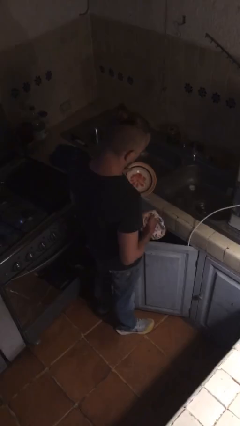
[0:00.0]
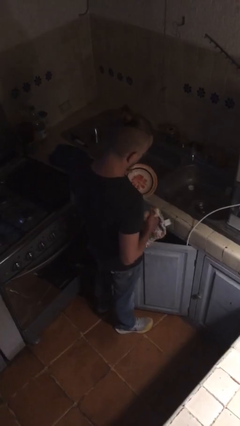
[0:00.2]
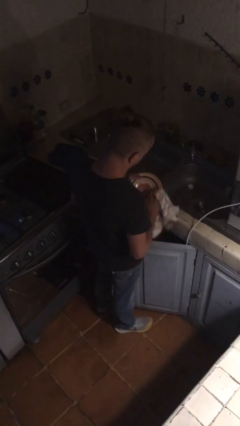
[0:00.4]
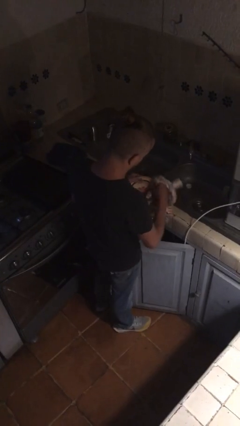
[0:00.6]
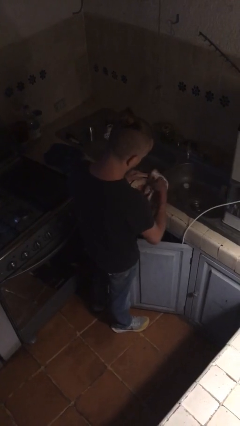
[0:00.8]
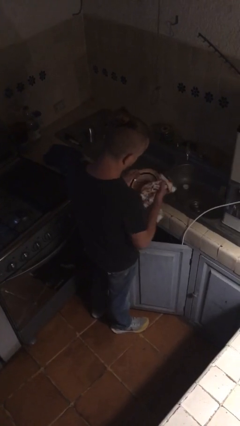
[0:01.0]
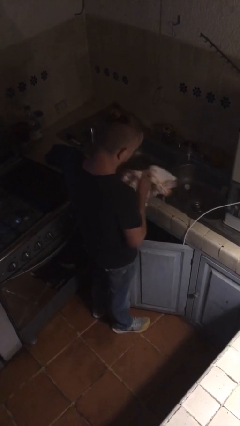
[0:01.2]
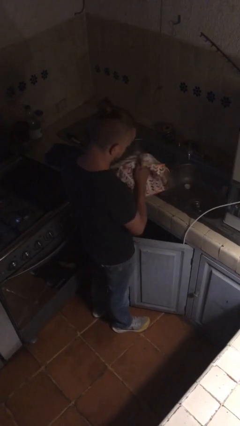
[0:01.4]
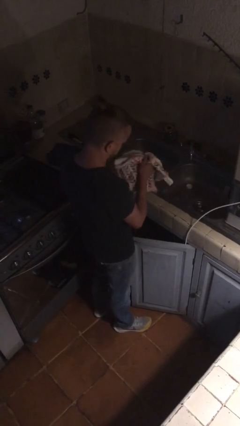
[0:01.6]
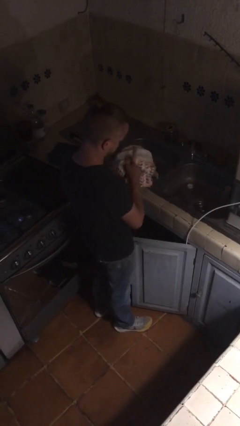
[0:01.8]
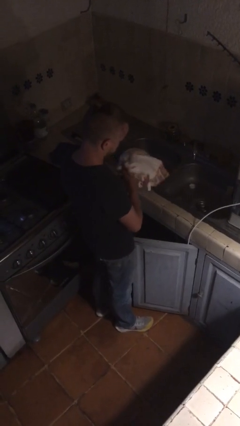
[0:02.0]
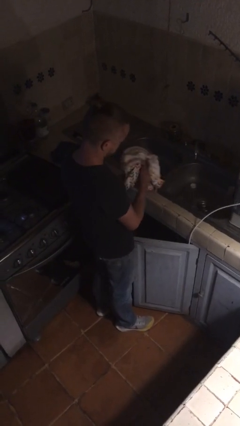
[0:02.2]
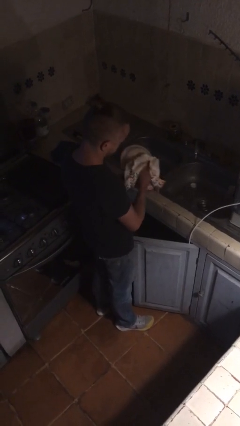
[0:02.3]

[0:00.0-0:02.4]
person dries dish

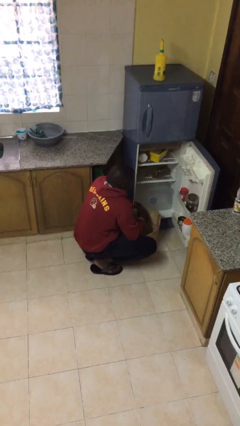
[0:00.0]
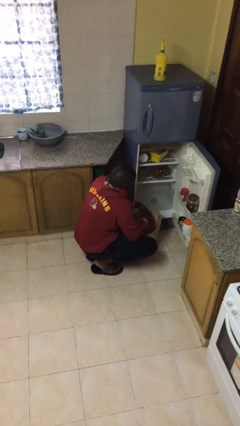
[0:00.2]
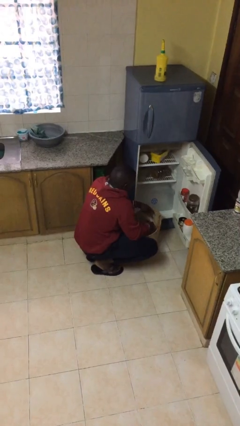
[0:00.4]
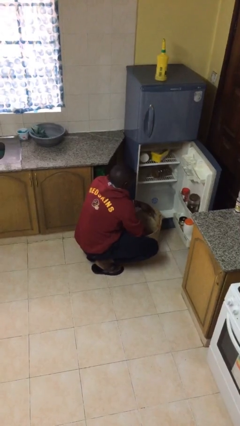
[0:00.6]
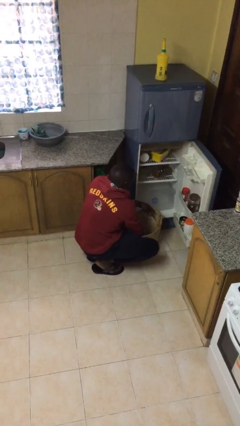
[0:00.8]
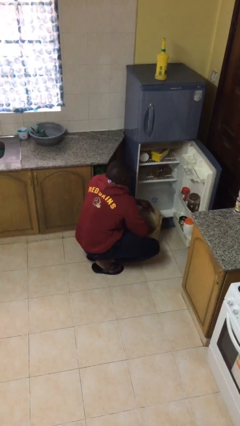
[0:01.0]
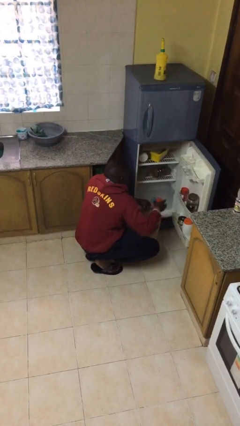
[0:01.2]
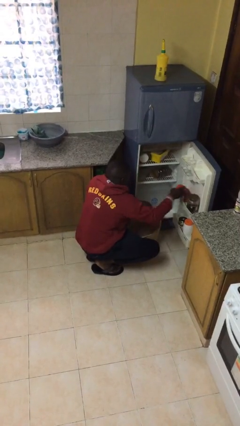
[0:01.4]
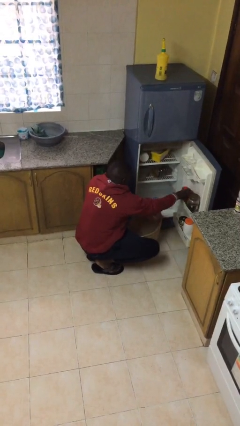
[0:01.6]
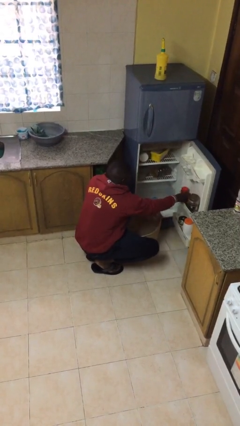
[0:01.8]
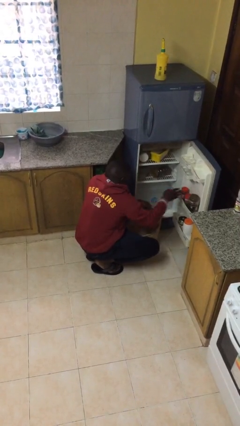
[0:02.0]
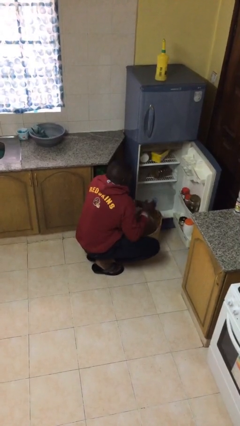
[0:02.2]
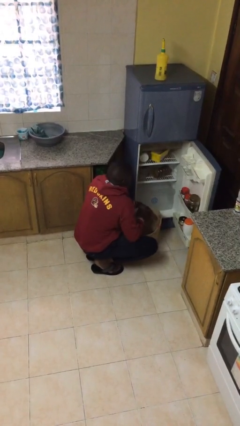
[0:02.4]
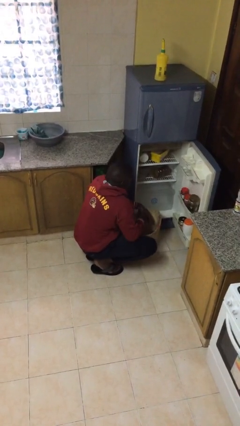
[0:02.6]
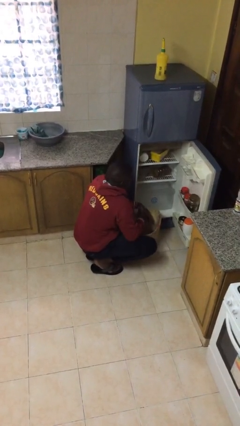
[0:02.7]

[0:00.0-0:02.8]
person loads groceries into refrigerator

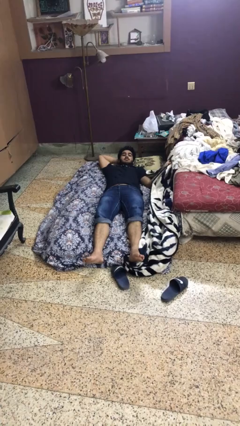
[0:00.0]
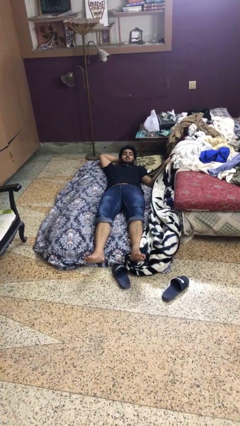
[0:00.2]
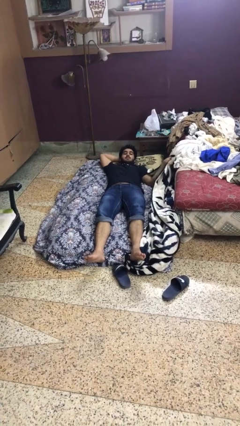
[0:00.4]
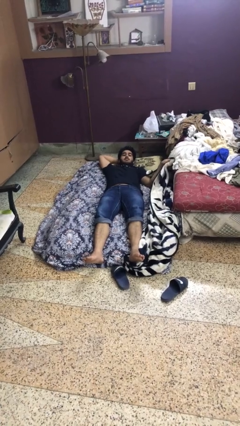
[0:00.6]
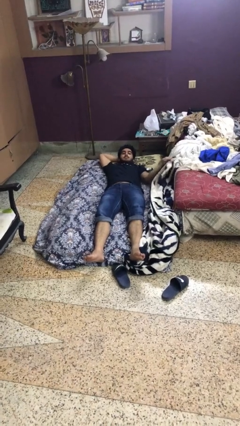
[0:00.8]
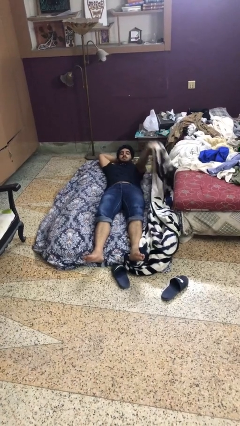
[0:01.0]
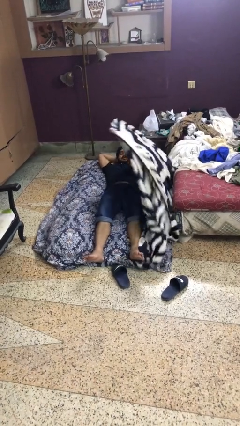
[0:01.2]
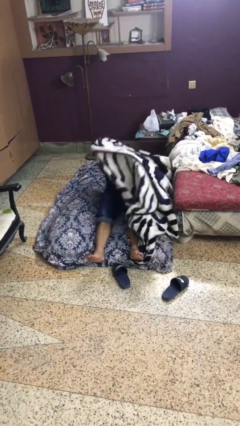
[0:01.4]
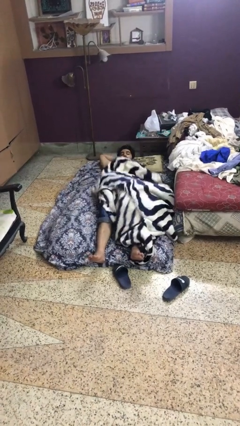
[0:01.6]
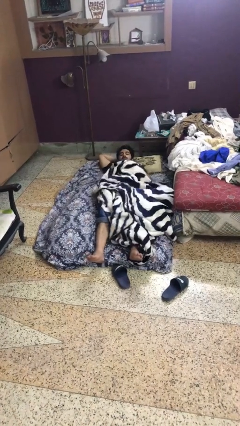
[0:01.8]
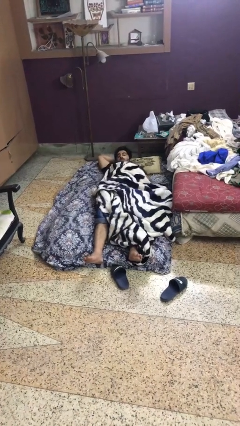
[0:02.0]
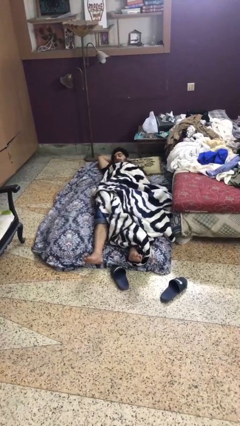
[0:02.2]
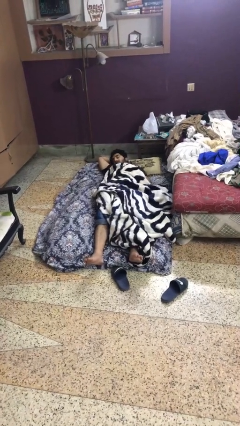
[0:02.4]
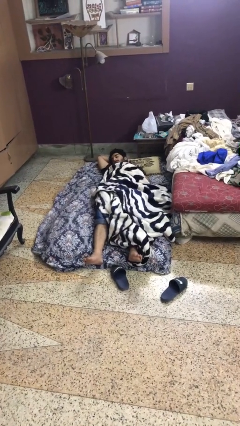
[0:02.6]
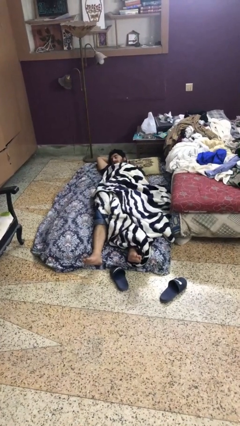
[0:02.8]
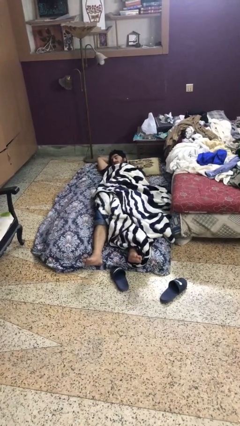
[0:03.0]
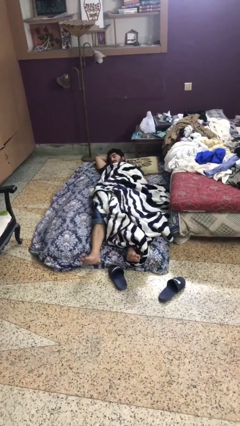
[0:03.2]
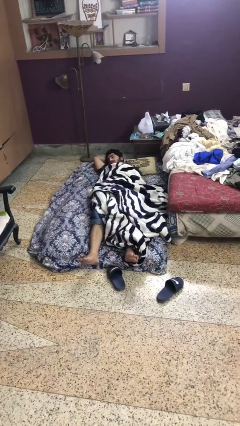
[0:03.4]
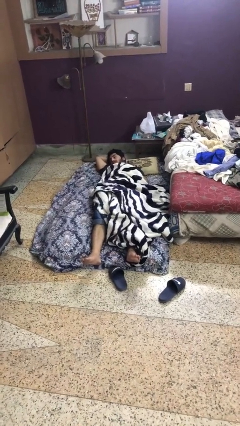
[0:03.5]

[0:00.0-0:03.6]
person covers with blanket

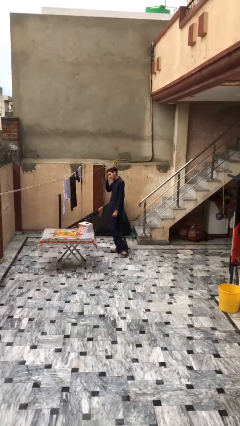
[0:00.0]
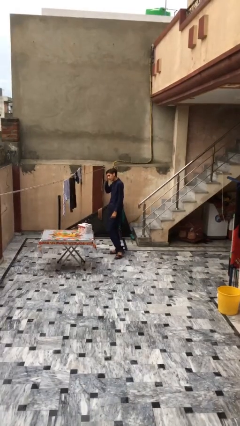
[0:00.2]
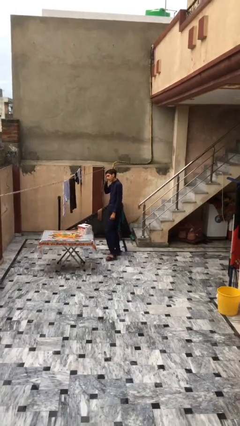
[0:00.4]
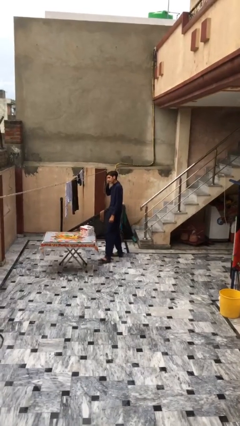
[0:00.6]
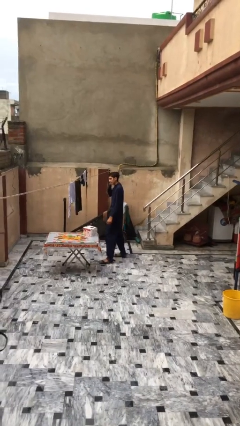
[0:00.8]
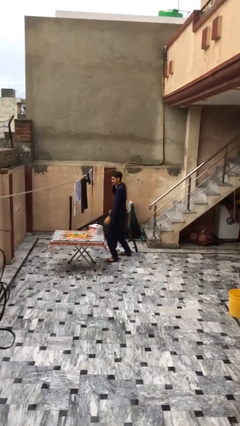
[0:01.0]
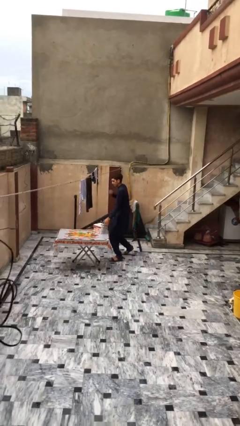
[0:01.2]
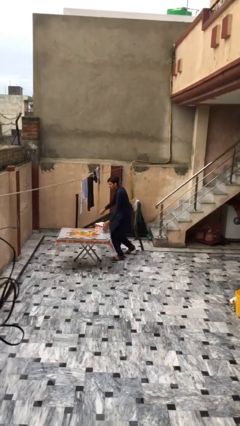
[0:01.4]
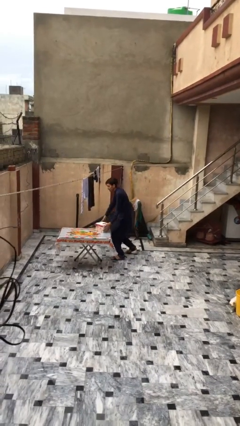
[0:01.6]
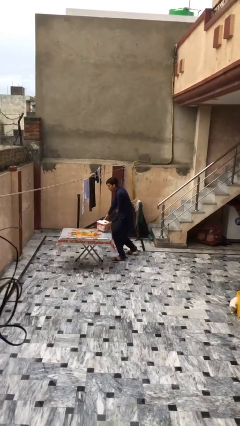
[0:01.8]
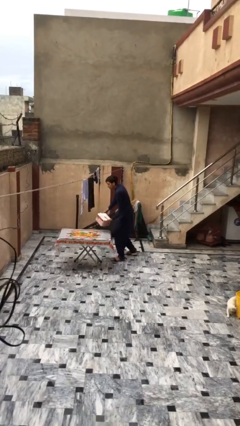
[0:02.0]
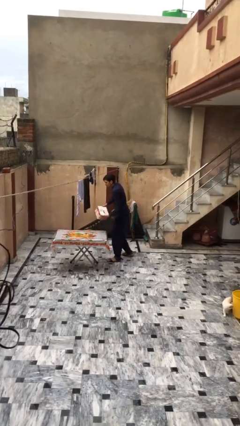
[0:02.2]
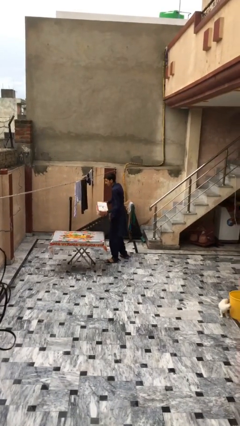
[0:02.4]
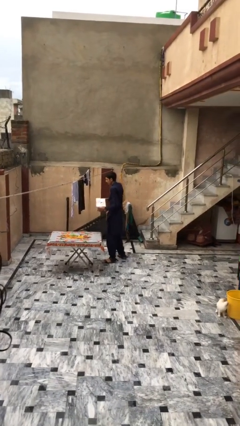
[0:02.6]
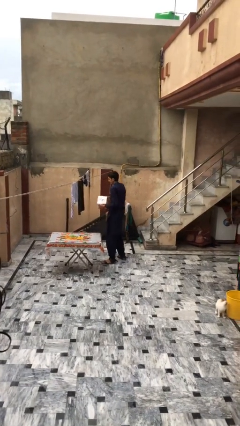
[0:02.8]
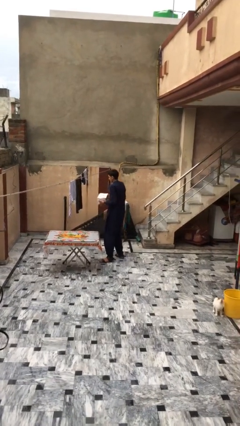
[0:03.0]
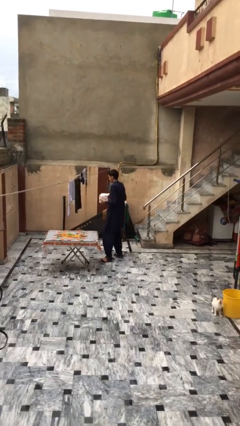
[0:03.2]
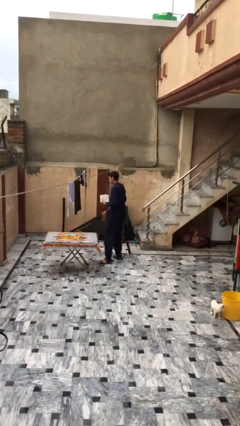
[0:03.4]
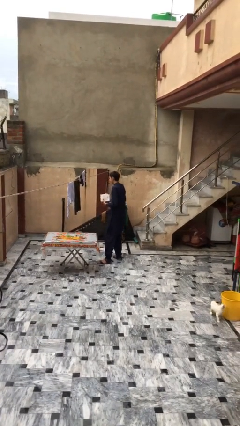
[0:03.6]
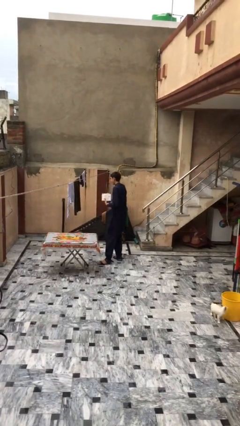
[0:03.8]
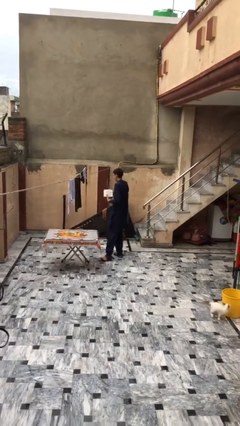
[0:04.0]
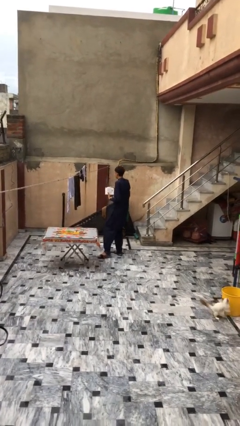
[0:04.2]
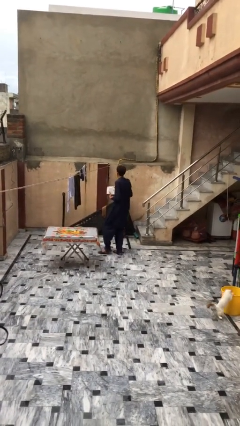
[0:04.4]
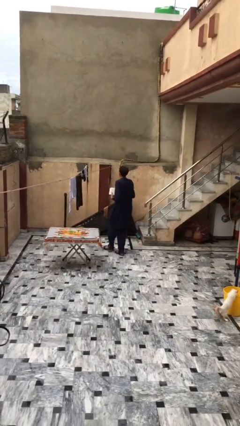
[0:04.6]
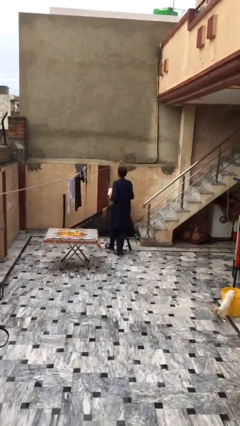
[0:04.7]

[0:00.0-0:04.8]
person picks up object from table

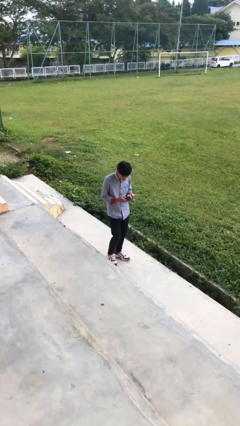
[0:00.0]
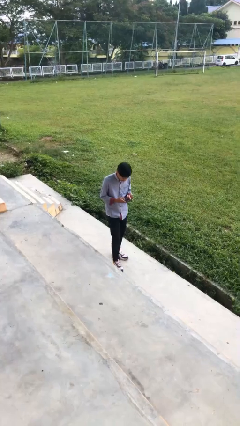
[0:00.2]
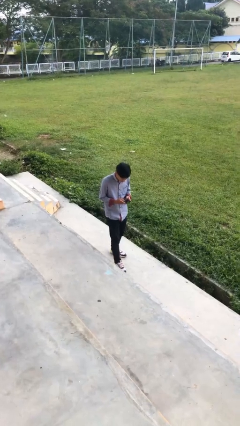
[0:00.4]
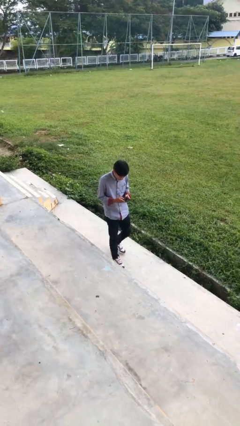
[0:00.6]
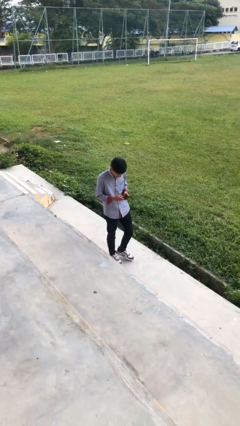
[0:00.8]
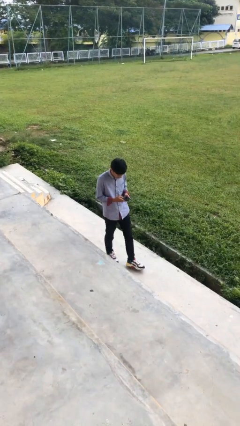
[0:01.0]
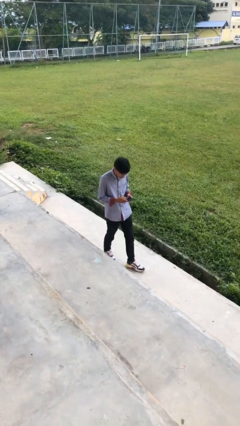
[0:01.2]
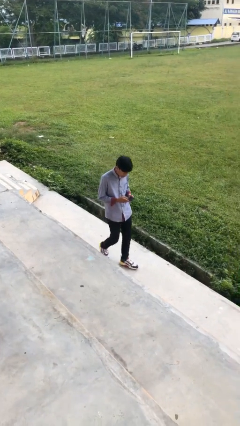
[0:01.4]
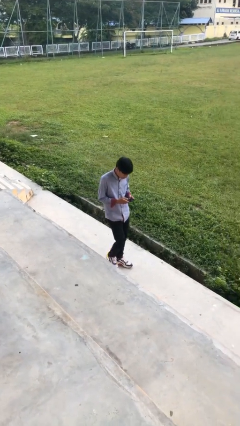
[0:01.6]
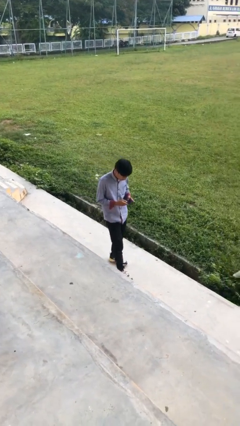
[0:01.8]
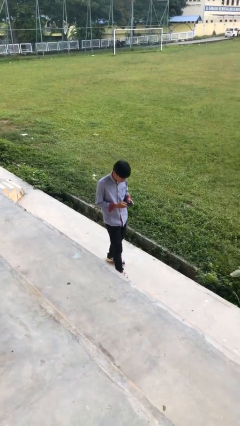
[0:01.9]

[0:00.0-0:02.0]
person texts on phone

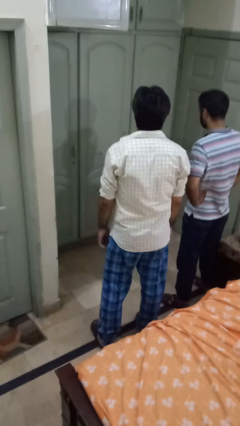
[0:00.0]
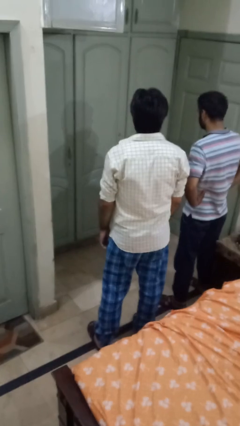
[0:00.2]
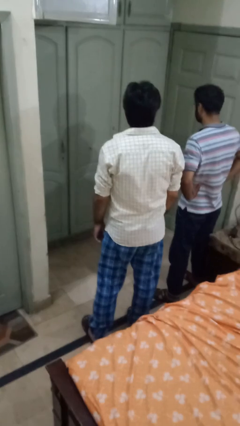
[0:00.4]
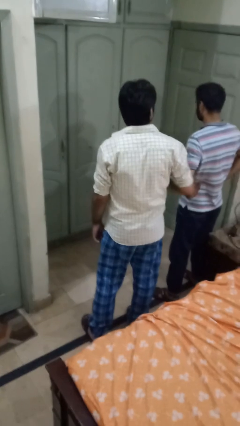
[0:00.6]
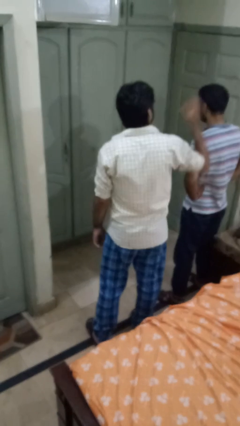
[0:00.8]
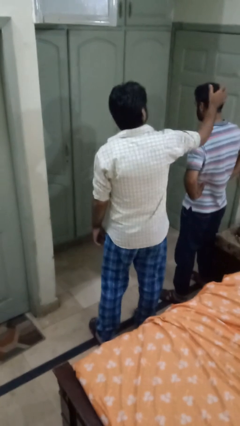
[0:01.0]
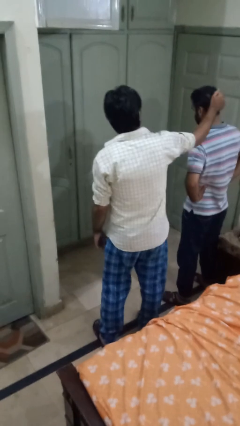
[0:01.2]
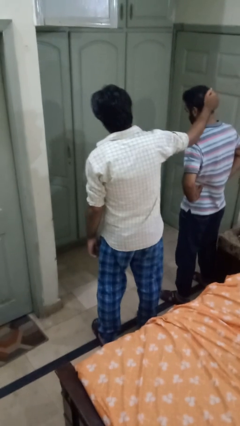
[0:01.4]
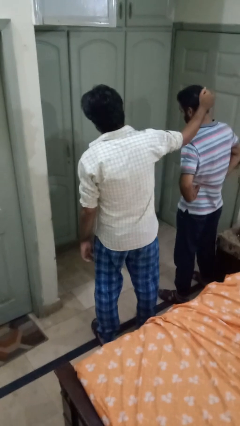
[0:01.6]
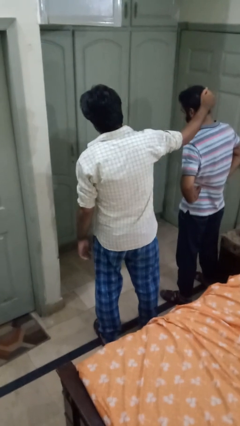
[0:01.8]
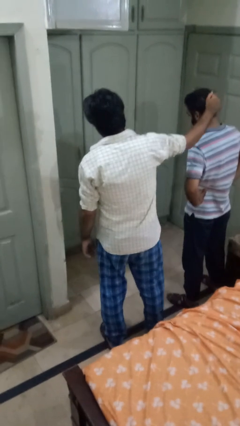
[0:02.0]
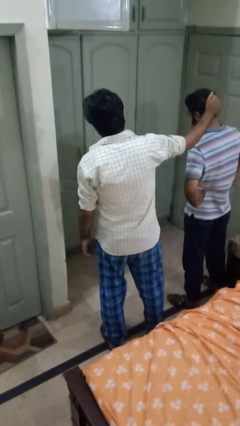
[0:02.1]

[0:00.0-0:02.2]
person grabs person by hair
